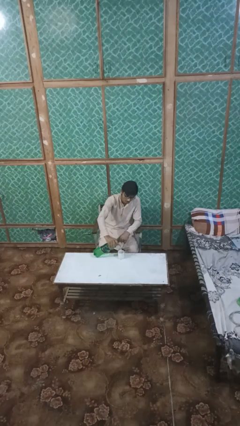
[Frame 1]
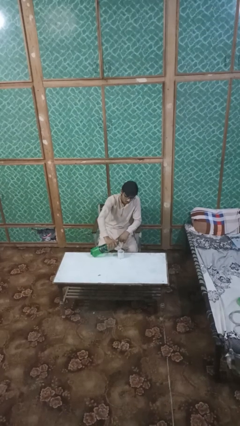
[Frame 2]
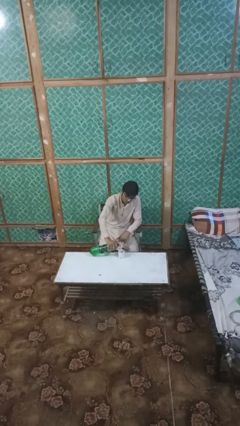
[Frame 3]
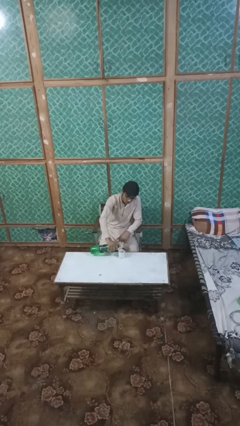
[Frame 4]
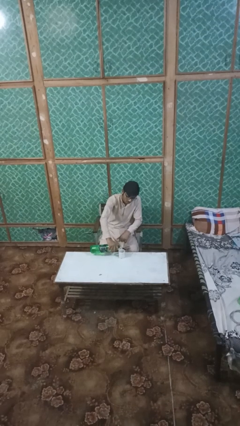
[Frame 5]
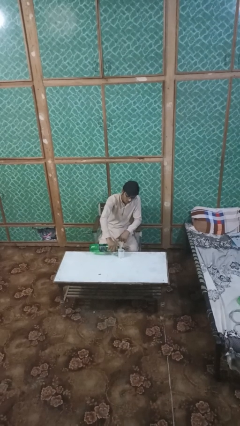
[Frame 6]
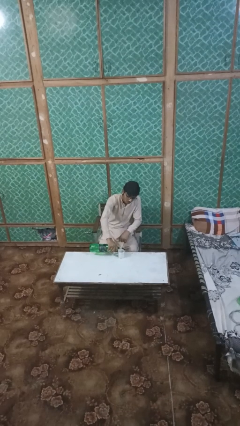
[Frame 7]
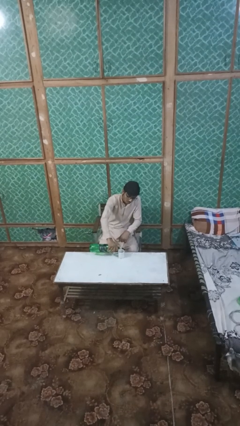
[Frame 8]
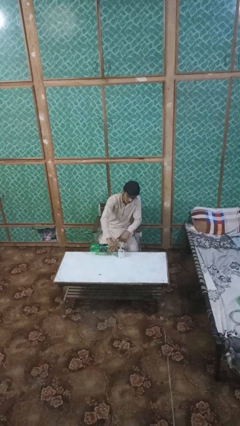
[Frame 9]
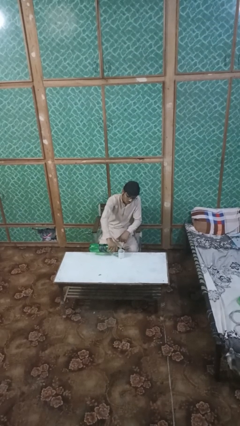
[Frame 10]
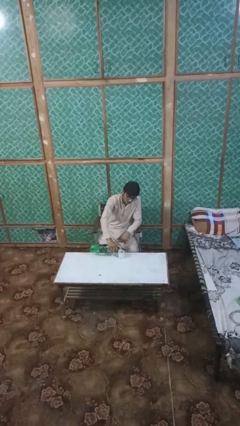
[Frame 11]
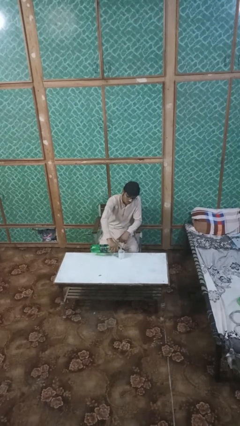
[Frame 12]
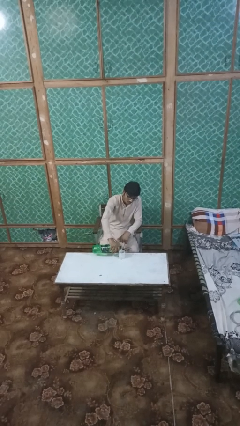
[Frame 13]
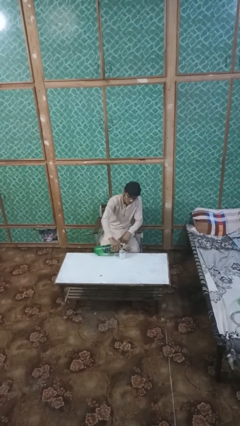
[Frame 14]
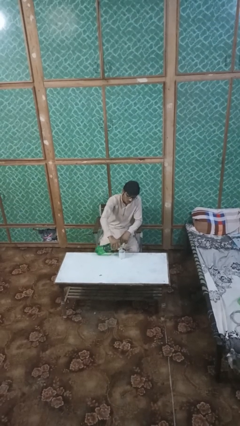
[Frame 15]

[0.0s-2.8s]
person pours liquid into cup

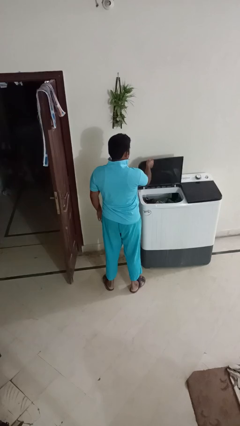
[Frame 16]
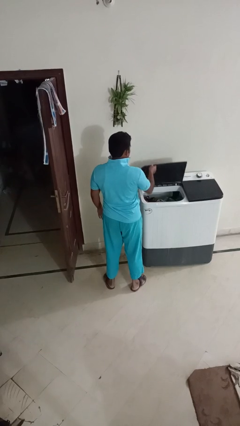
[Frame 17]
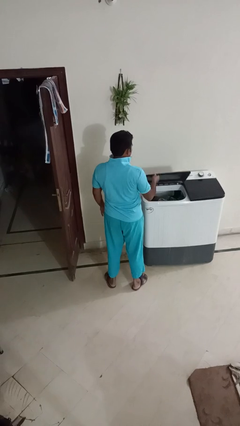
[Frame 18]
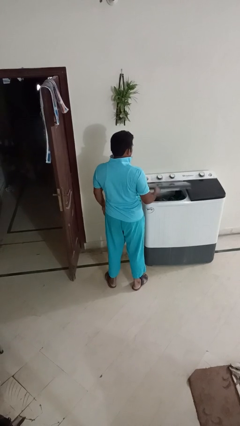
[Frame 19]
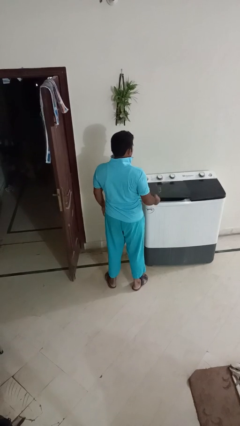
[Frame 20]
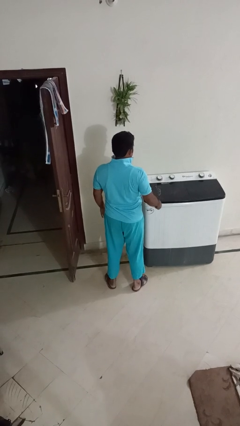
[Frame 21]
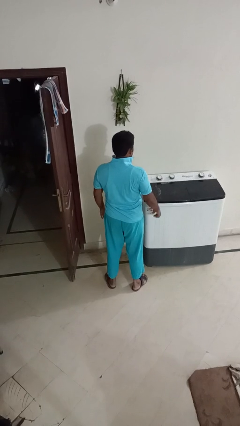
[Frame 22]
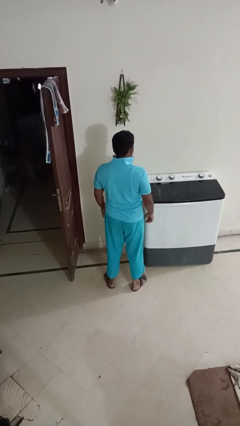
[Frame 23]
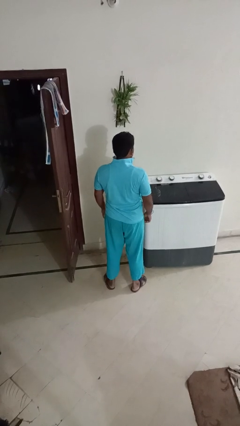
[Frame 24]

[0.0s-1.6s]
person closes clothes washer

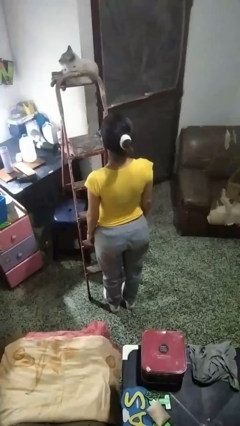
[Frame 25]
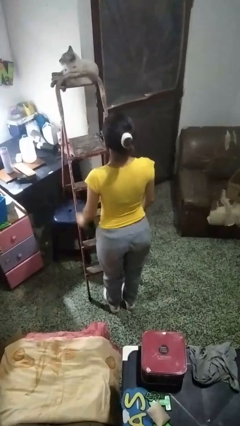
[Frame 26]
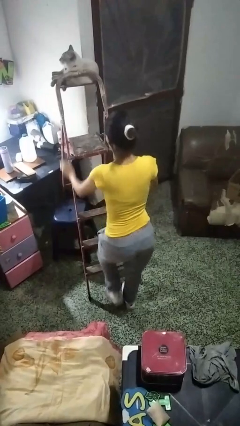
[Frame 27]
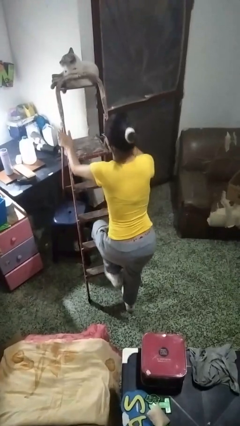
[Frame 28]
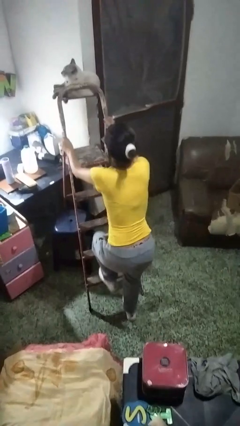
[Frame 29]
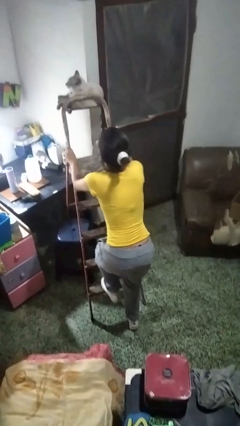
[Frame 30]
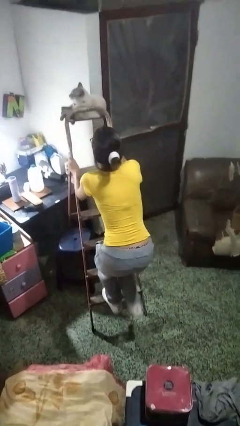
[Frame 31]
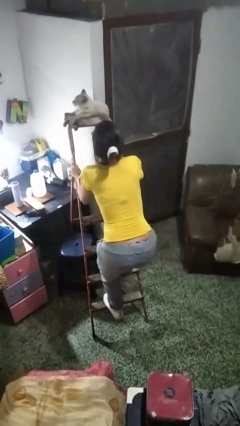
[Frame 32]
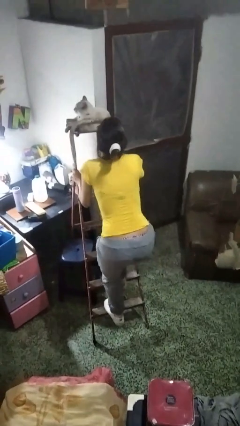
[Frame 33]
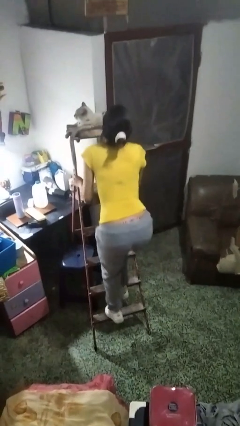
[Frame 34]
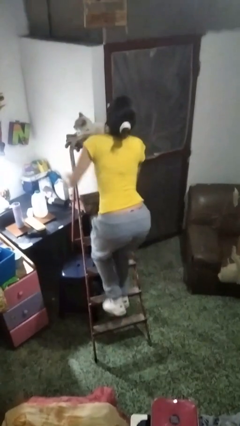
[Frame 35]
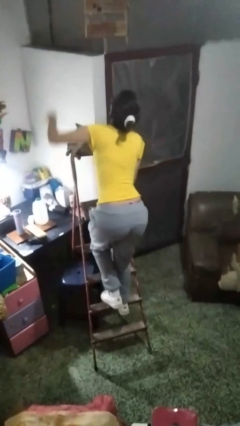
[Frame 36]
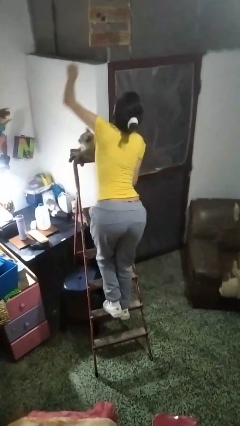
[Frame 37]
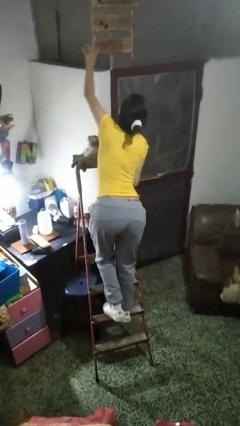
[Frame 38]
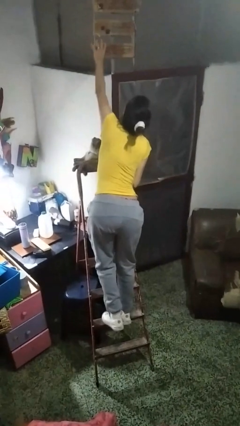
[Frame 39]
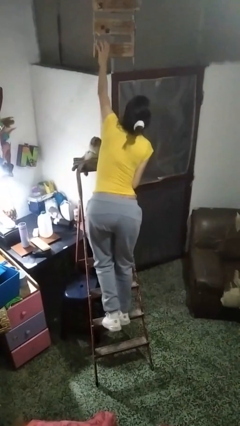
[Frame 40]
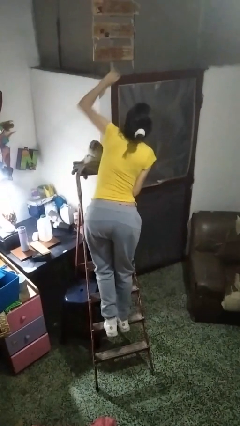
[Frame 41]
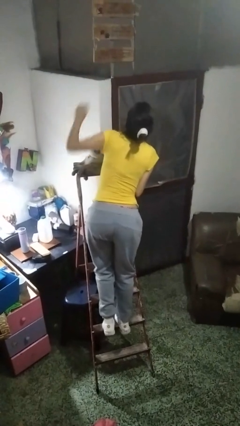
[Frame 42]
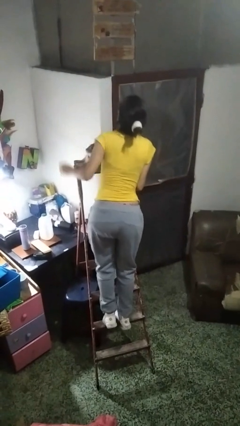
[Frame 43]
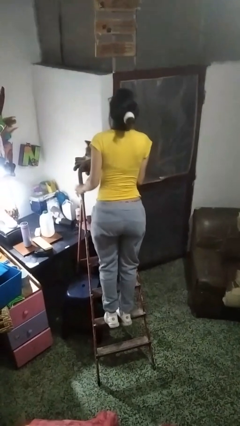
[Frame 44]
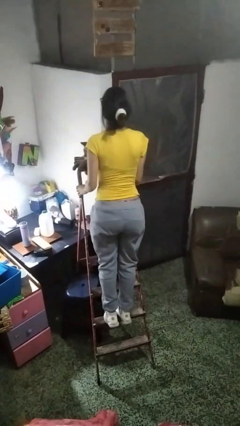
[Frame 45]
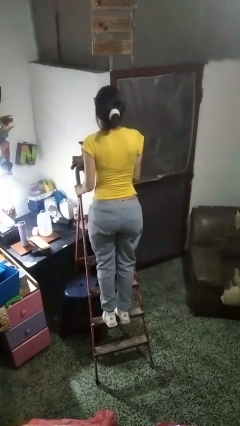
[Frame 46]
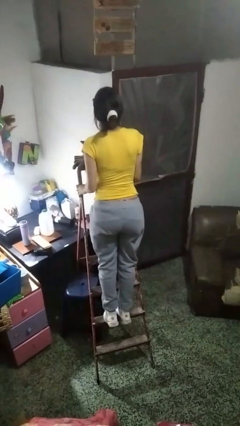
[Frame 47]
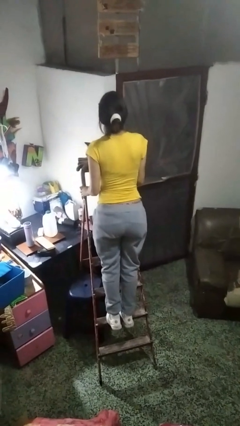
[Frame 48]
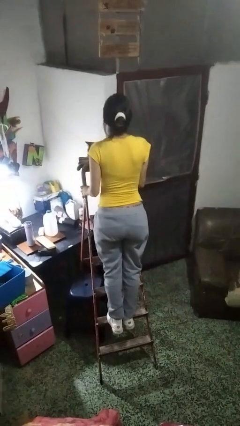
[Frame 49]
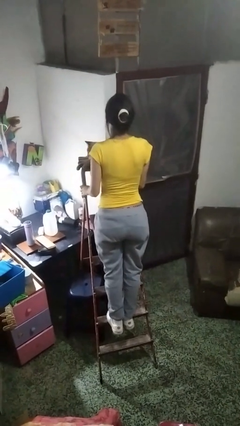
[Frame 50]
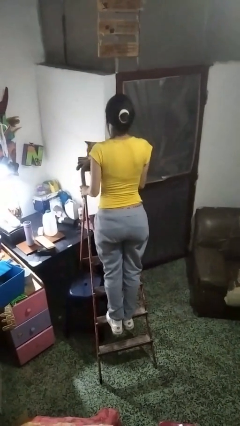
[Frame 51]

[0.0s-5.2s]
person climbs up ladder

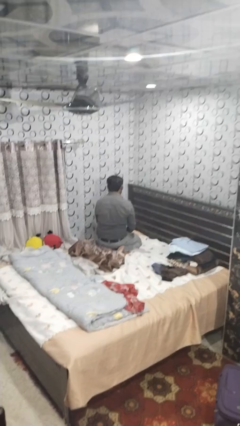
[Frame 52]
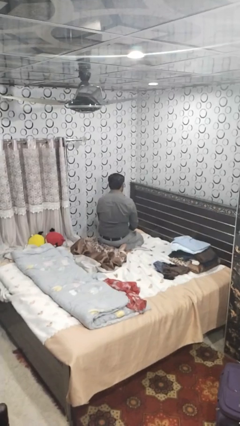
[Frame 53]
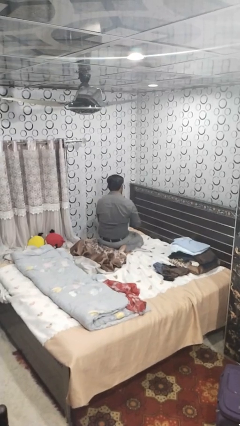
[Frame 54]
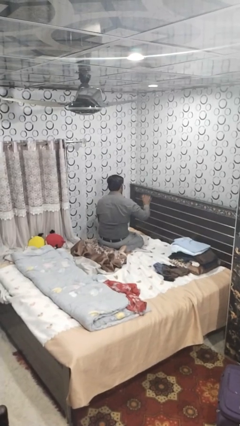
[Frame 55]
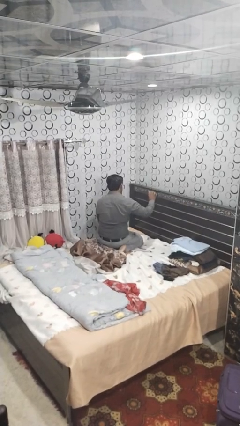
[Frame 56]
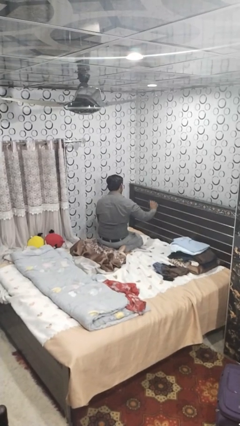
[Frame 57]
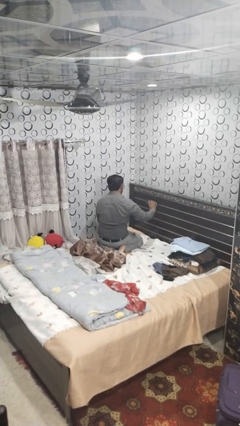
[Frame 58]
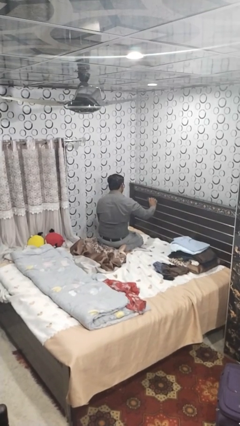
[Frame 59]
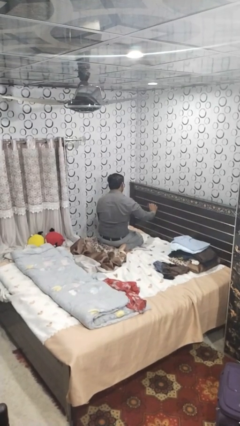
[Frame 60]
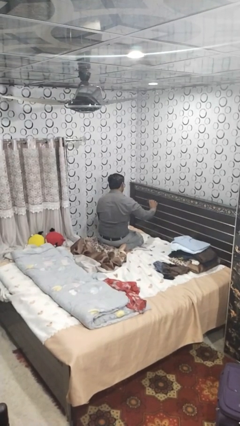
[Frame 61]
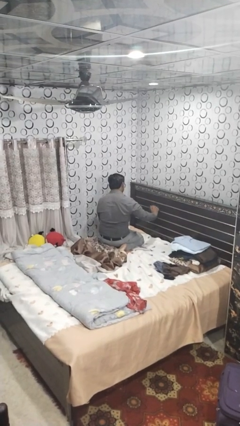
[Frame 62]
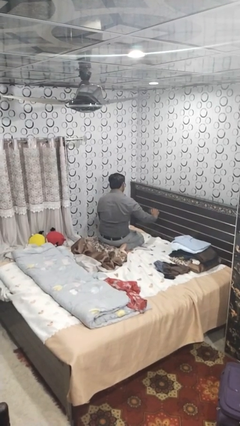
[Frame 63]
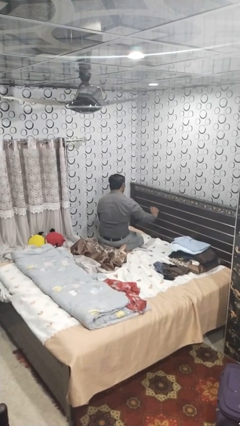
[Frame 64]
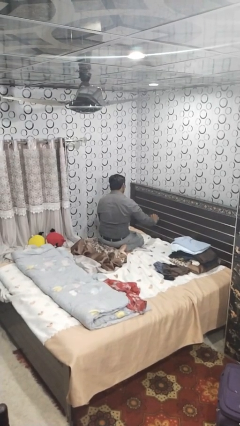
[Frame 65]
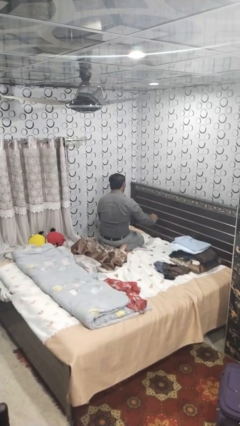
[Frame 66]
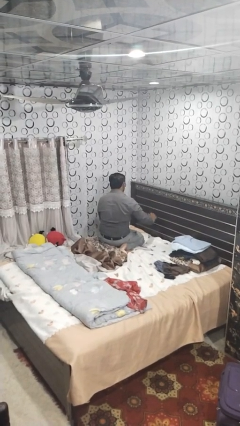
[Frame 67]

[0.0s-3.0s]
person dusts furniture

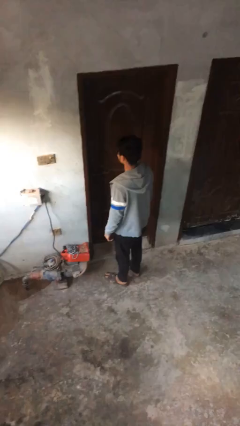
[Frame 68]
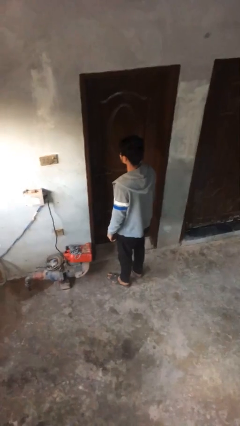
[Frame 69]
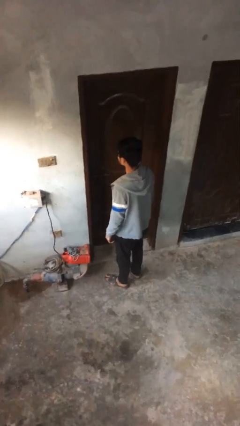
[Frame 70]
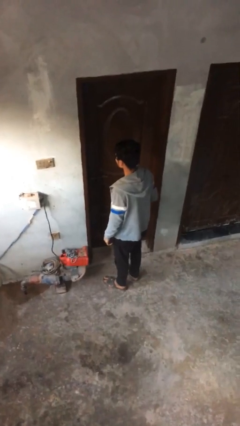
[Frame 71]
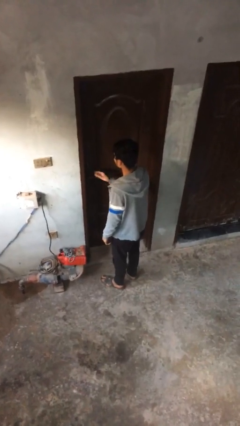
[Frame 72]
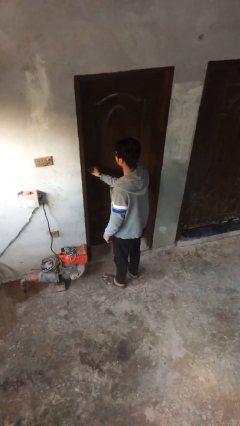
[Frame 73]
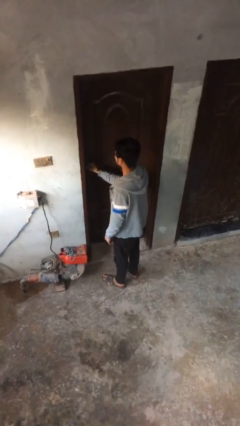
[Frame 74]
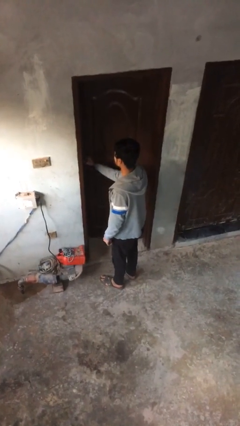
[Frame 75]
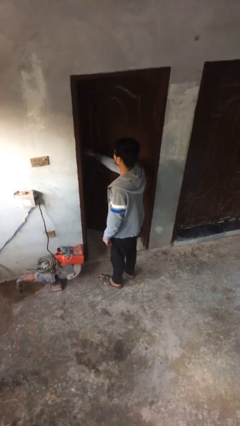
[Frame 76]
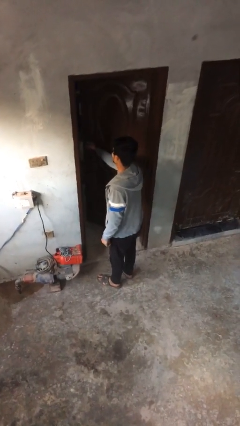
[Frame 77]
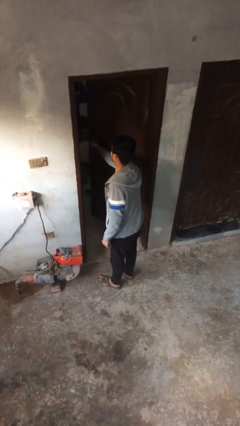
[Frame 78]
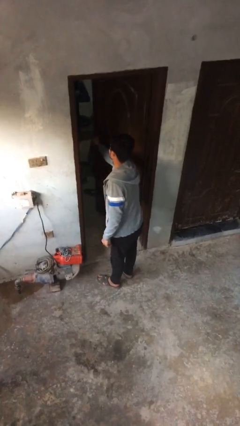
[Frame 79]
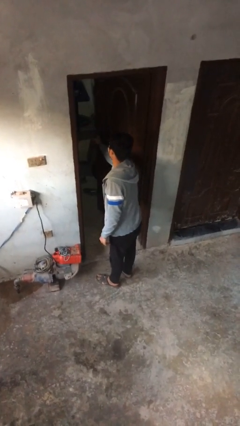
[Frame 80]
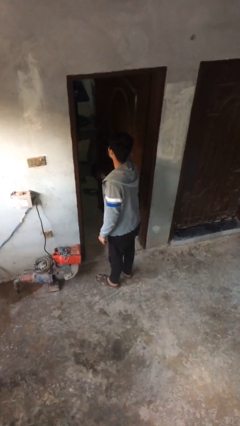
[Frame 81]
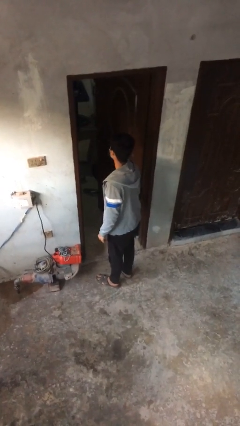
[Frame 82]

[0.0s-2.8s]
person opens facility door

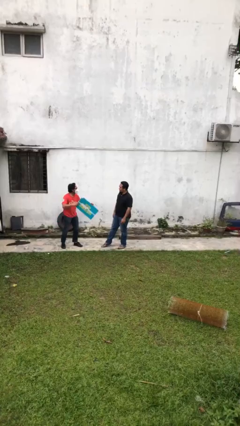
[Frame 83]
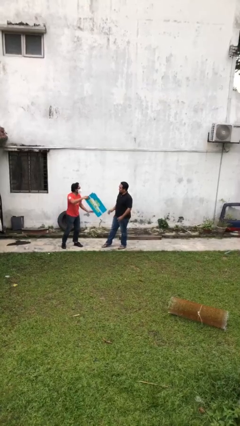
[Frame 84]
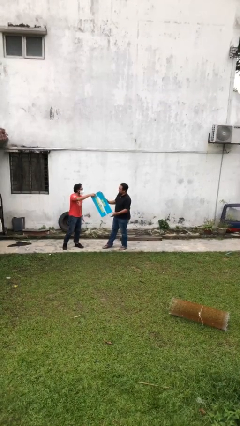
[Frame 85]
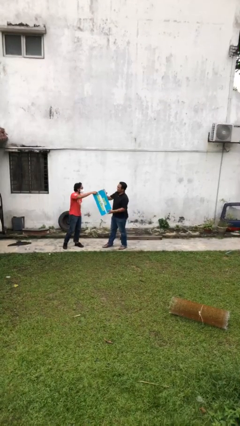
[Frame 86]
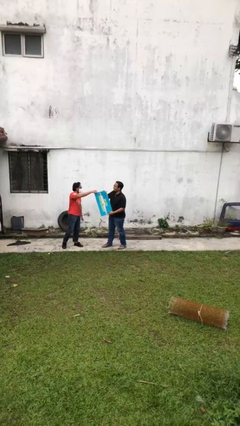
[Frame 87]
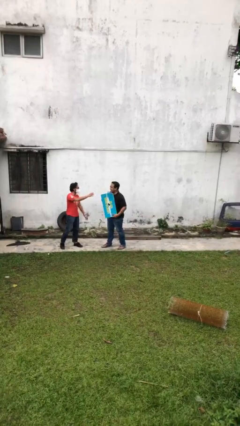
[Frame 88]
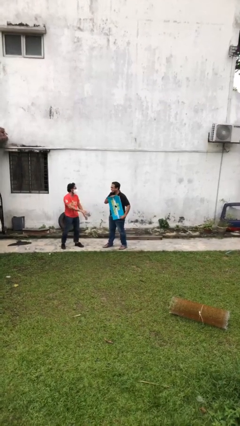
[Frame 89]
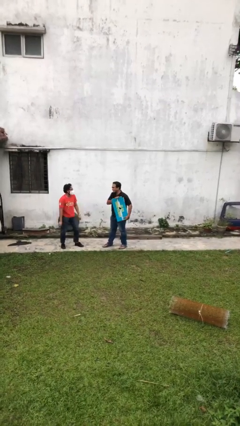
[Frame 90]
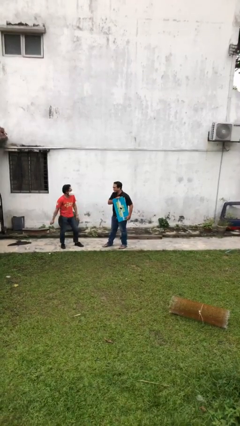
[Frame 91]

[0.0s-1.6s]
person transfers object to person

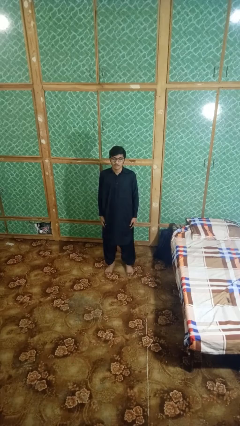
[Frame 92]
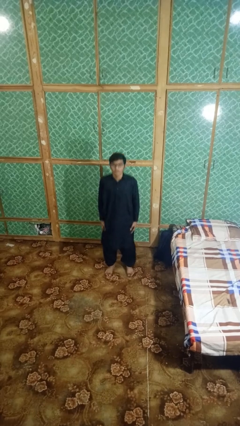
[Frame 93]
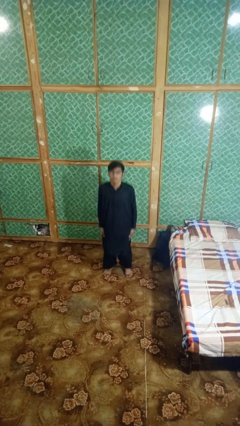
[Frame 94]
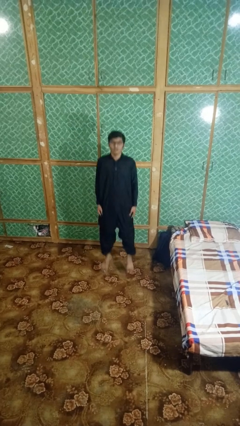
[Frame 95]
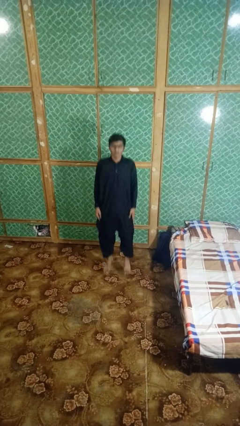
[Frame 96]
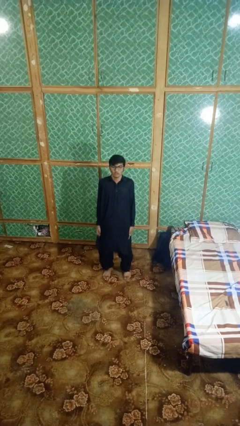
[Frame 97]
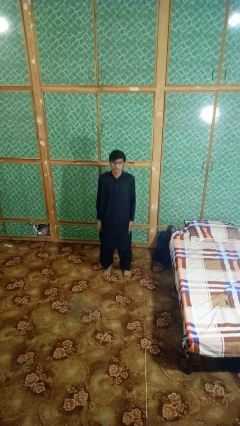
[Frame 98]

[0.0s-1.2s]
person jumps
